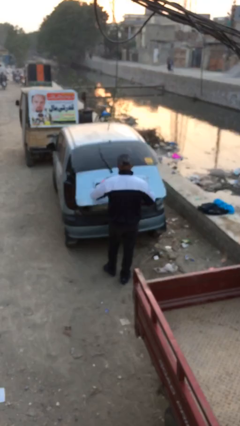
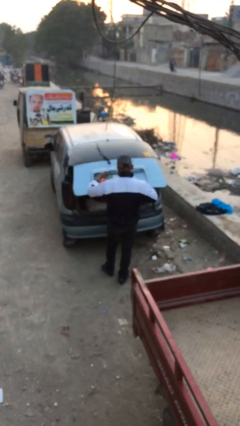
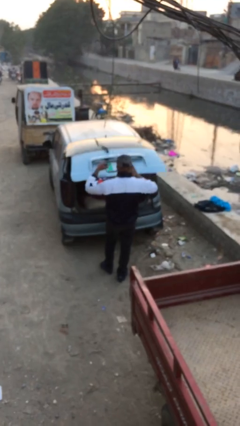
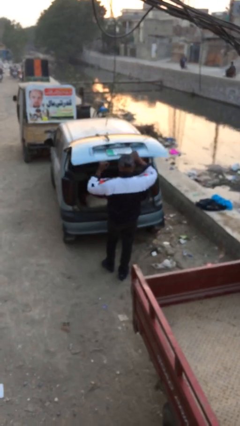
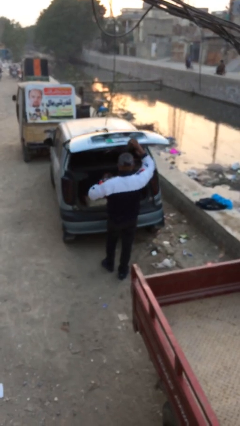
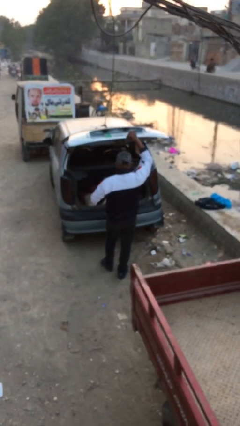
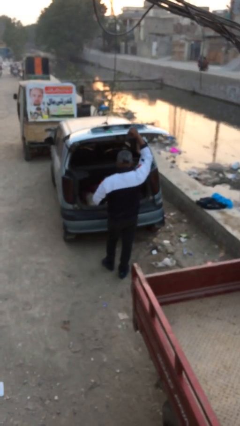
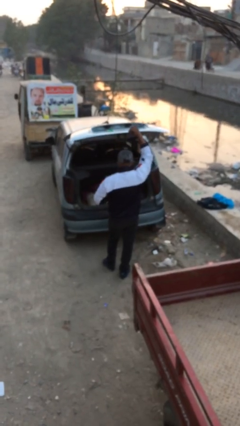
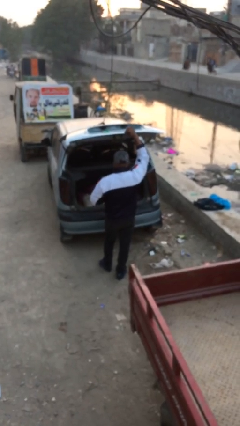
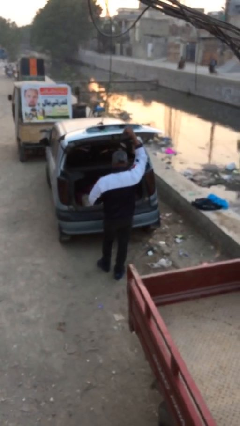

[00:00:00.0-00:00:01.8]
person opens car trunk

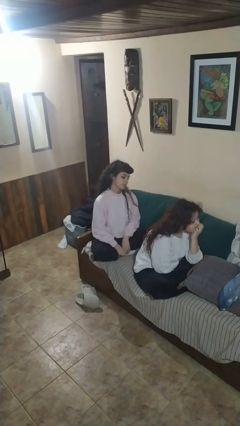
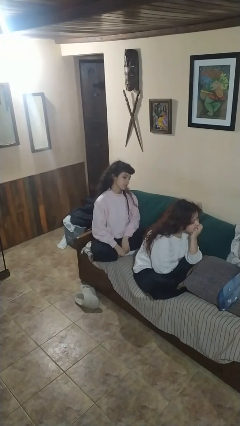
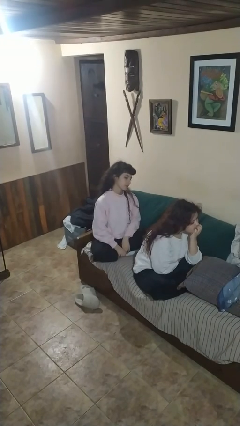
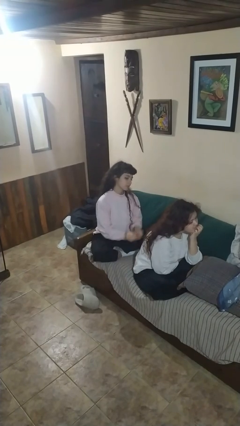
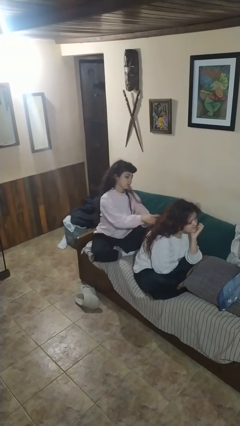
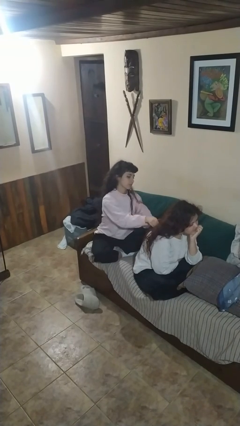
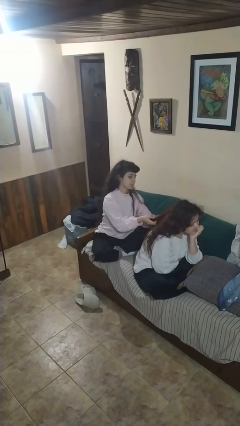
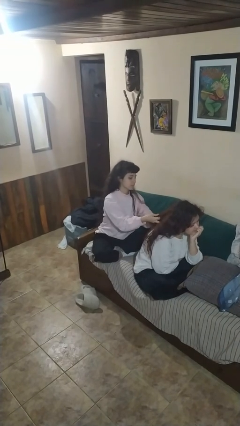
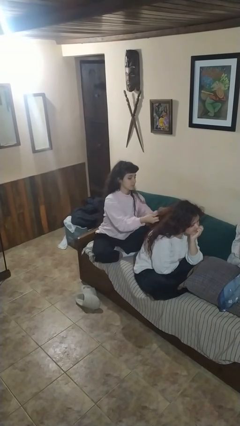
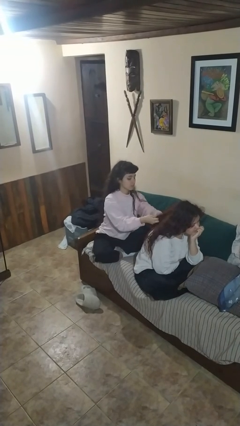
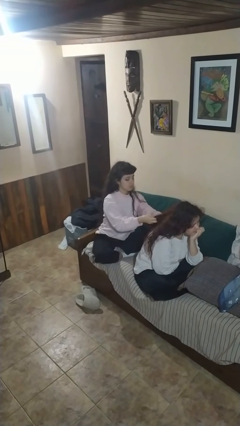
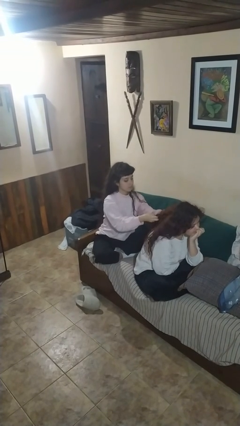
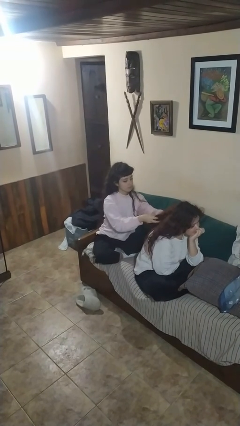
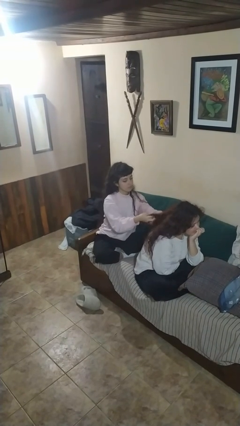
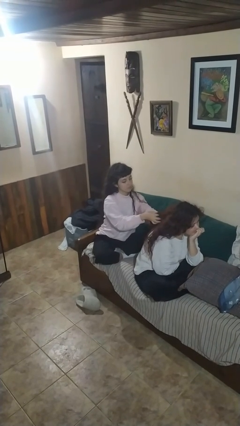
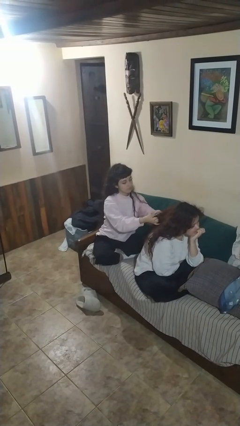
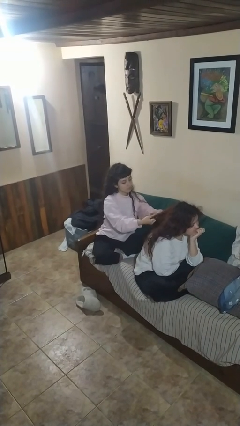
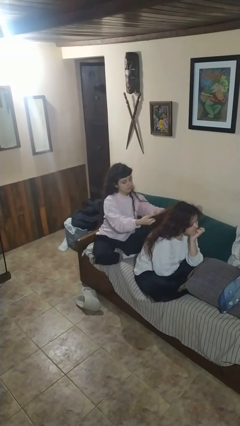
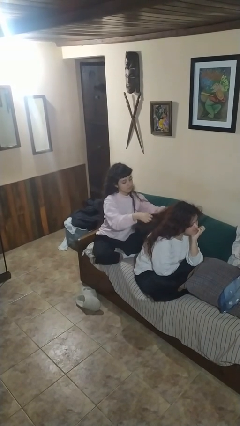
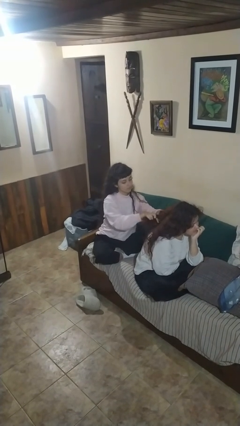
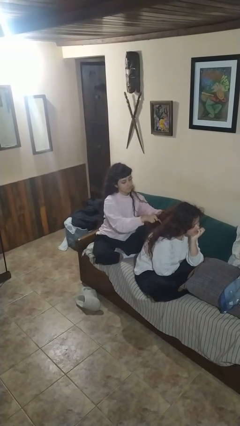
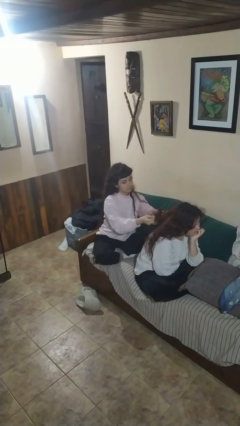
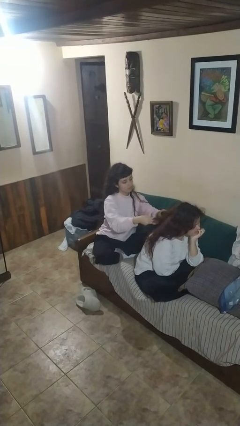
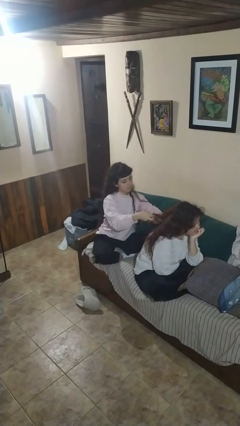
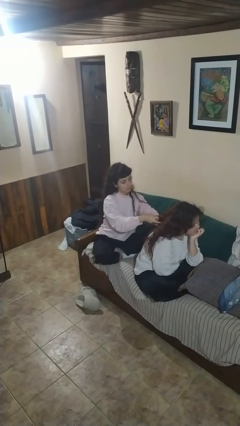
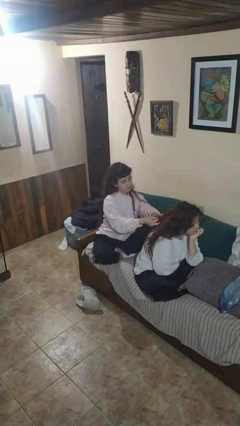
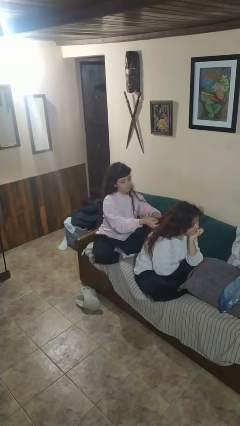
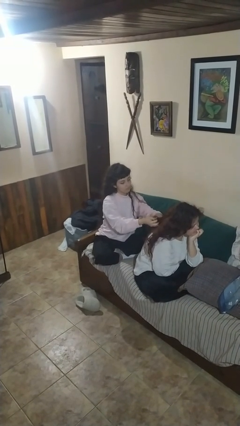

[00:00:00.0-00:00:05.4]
person braids hair of person

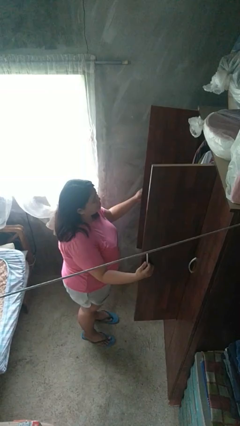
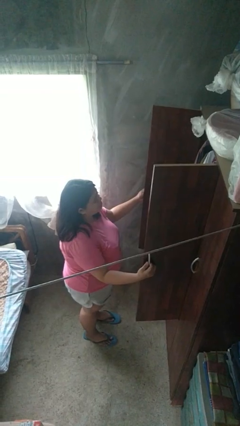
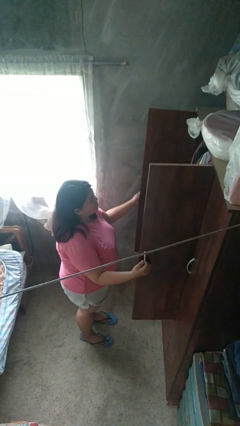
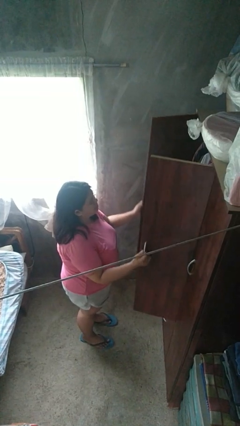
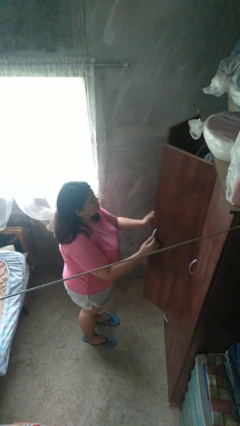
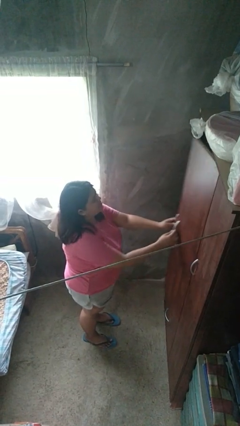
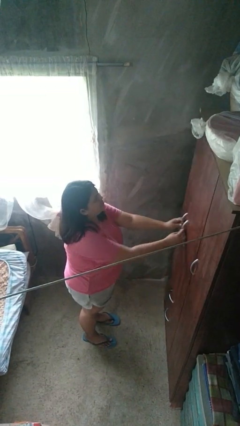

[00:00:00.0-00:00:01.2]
person closes closet door

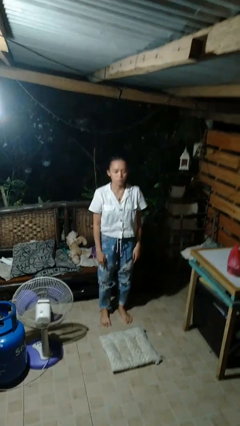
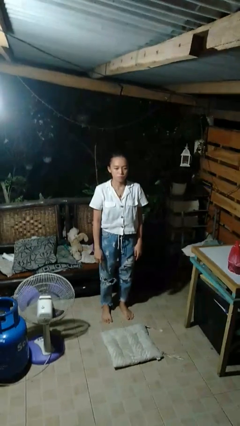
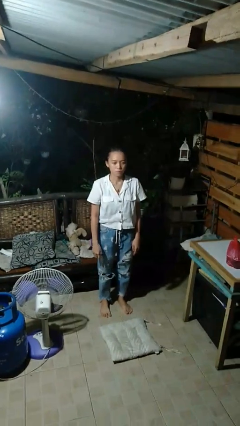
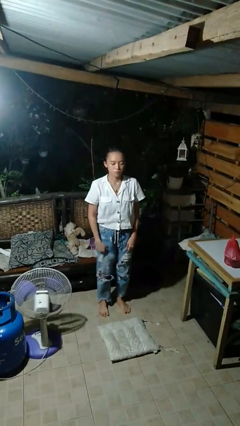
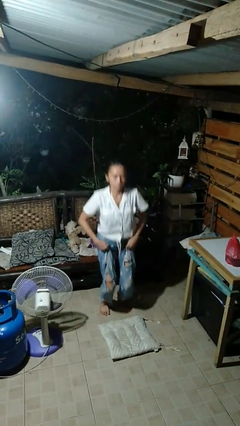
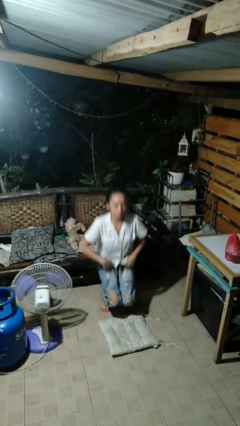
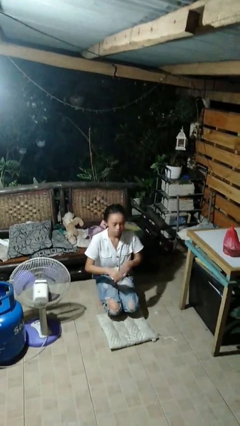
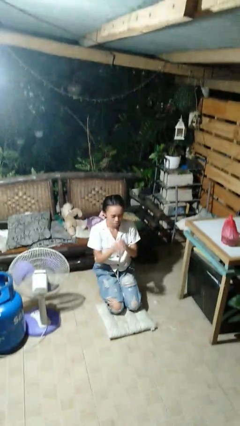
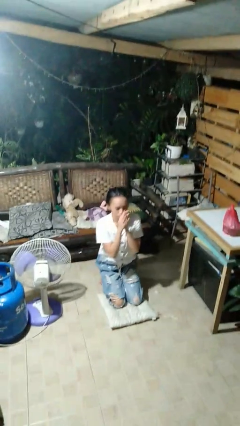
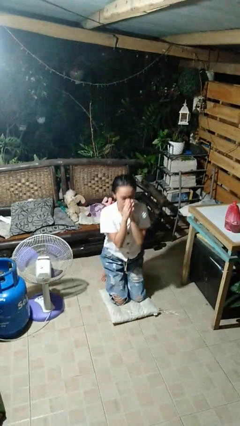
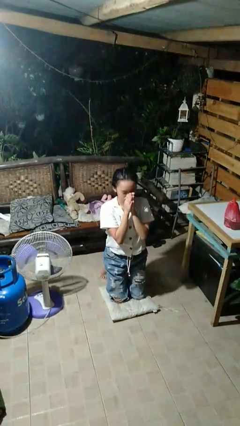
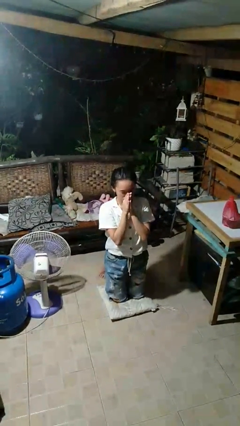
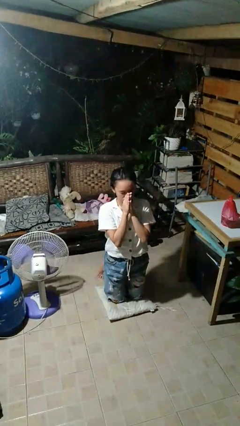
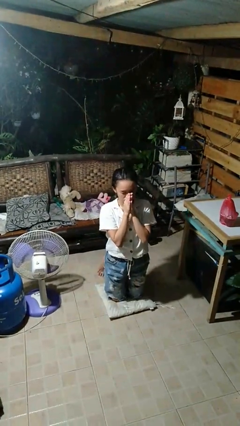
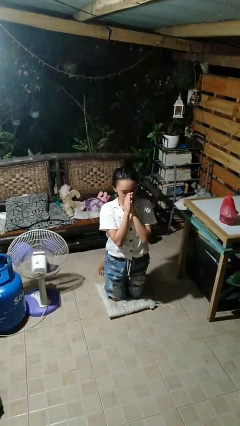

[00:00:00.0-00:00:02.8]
person prays

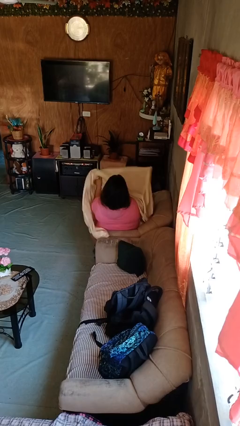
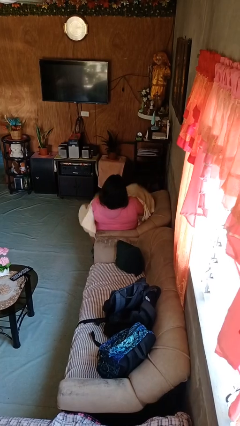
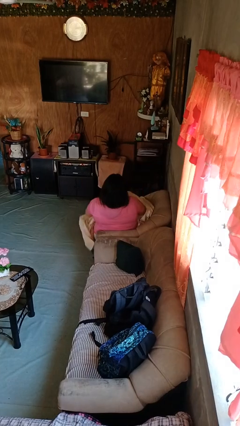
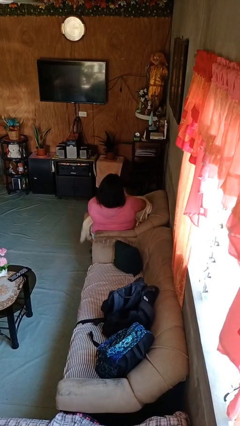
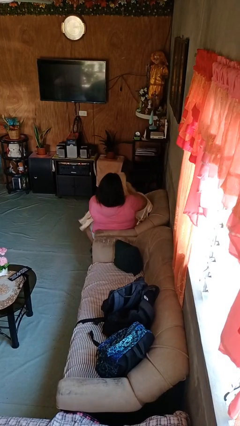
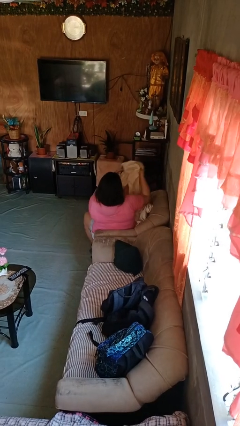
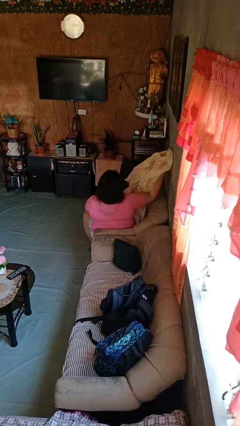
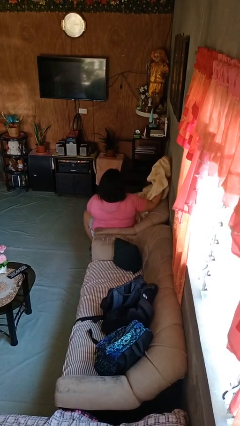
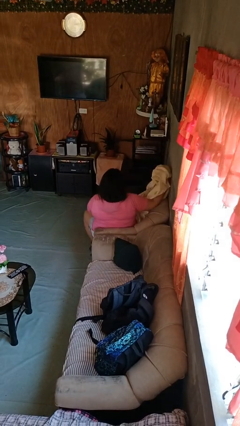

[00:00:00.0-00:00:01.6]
person uncovers with blanket

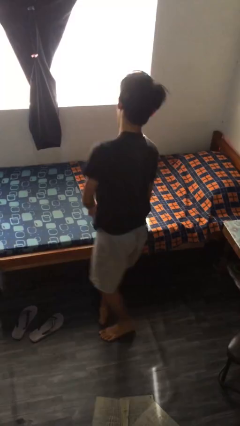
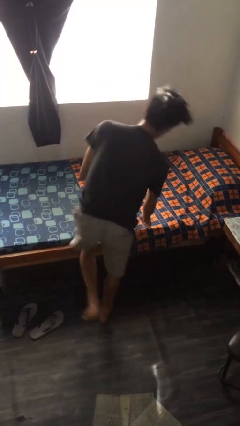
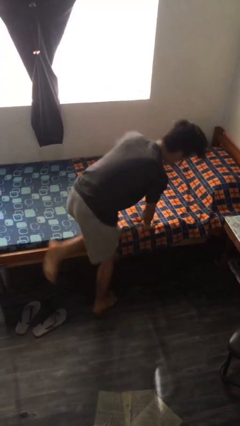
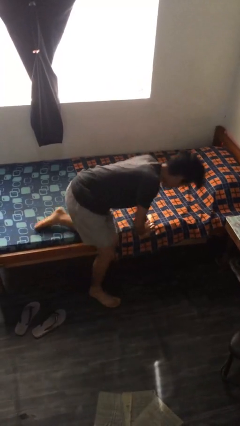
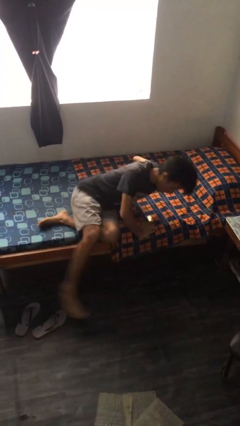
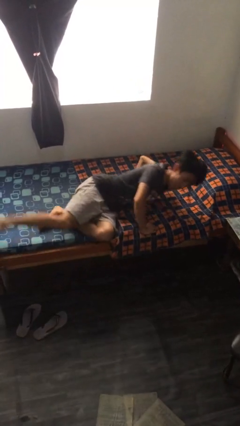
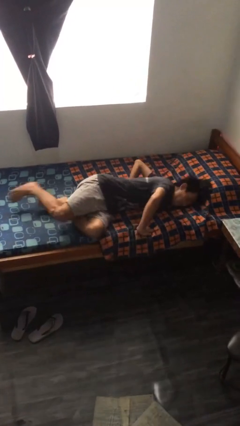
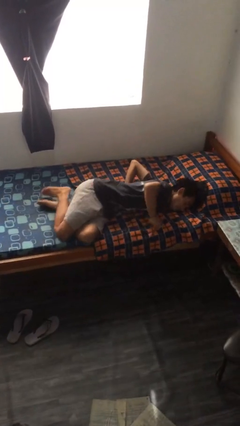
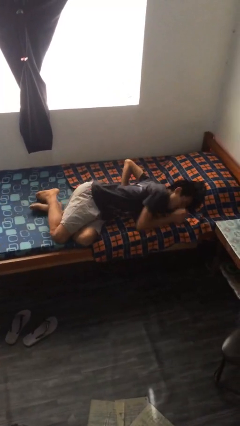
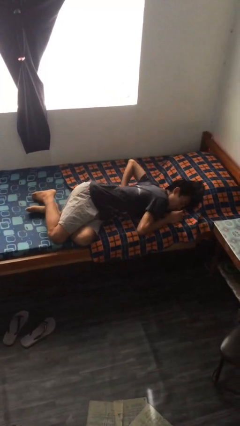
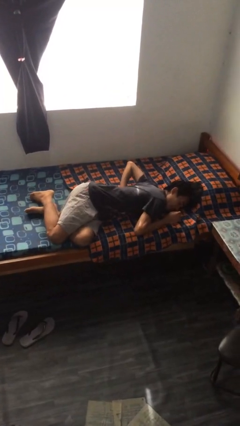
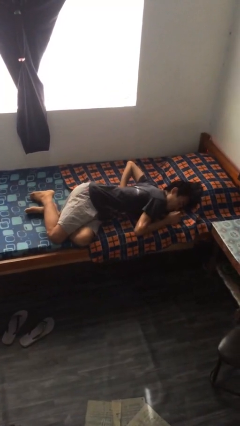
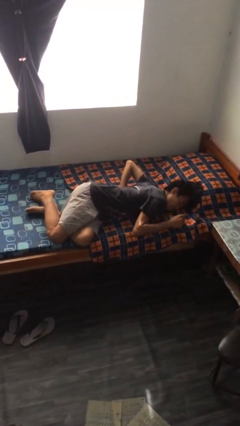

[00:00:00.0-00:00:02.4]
person lies down on bed

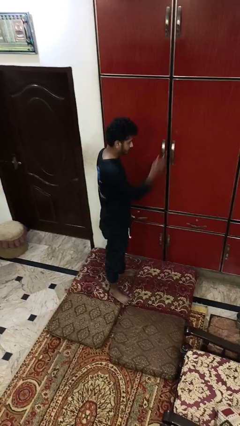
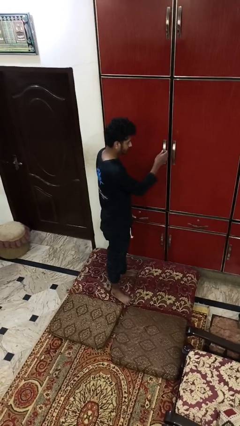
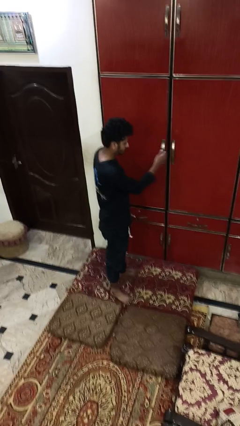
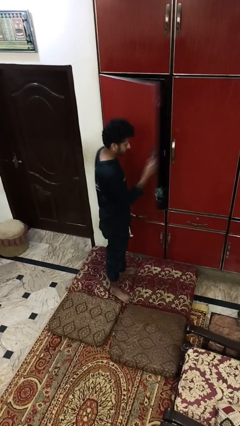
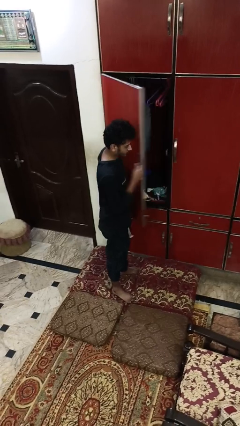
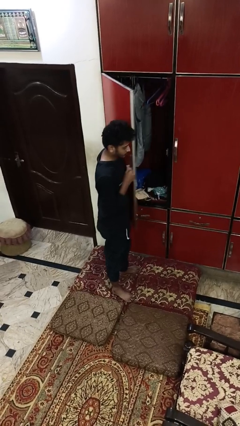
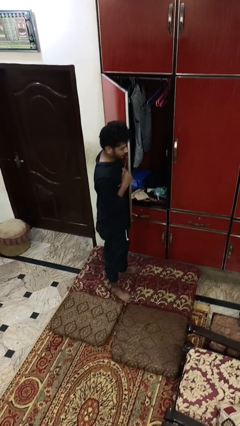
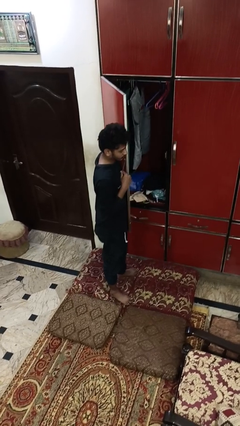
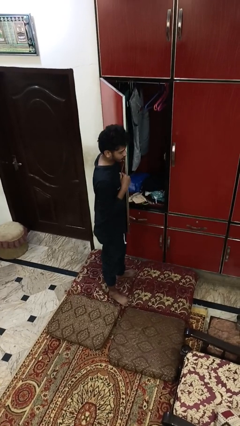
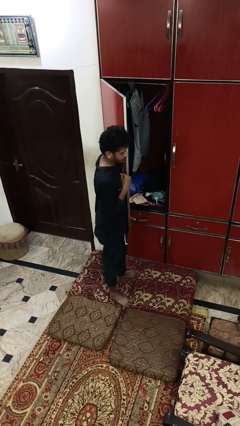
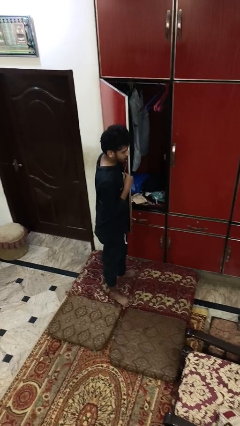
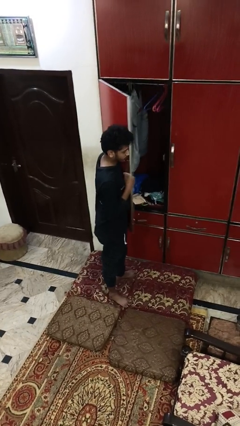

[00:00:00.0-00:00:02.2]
person opens closet door
